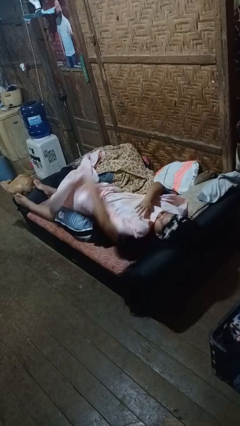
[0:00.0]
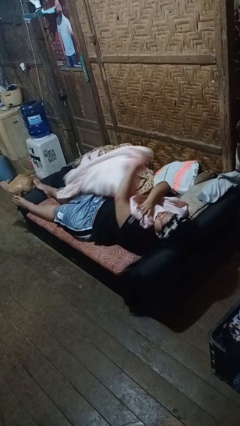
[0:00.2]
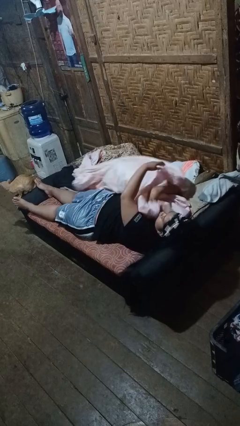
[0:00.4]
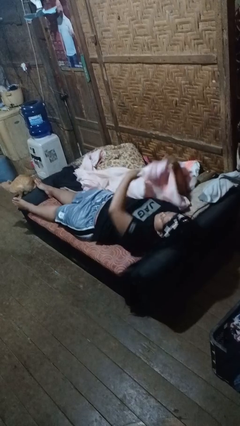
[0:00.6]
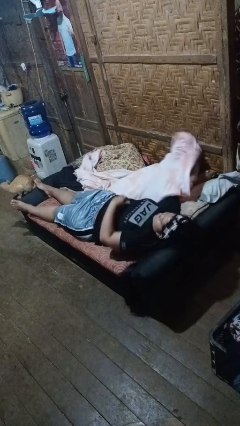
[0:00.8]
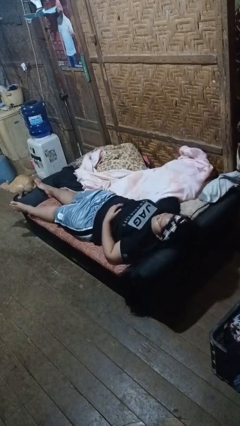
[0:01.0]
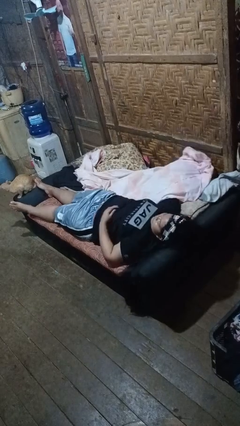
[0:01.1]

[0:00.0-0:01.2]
person uncovers with bedsheets

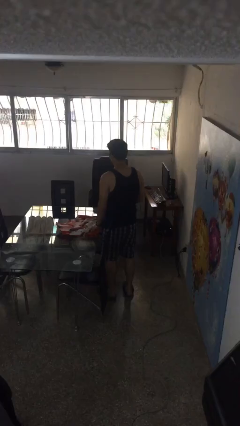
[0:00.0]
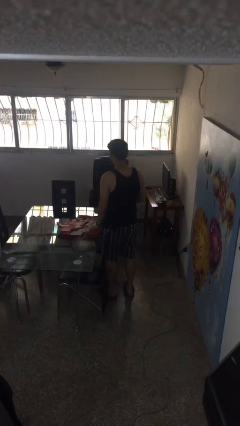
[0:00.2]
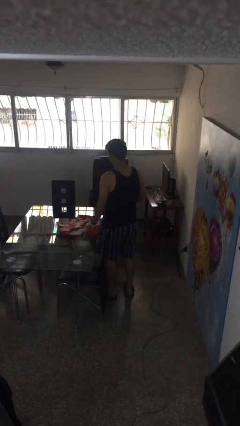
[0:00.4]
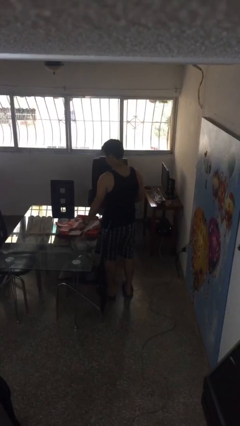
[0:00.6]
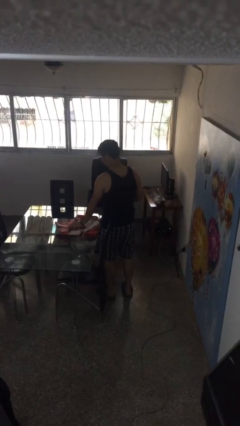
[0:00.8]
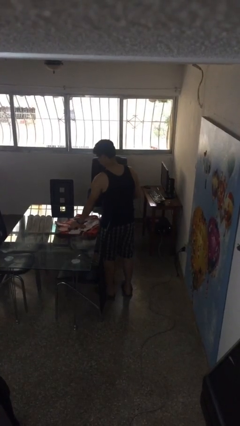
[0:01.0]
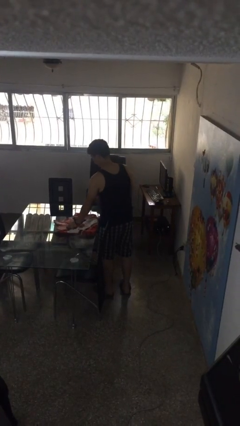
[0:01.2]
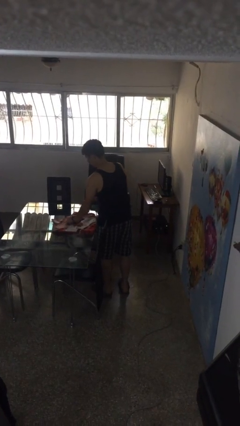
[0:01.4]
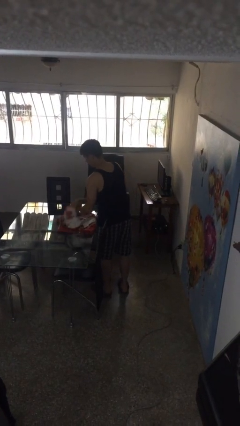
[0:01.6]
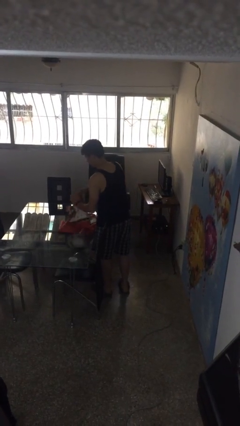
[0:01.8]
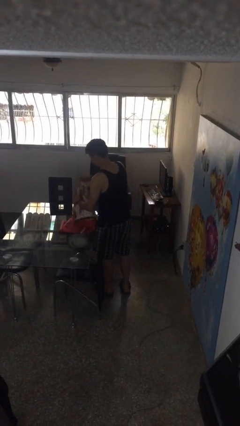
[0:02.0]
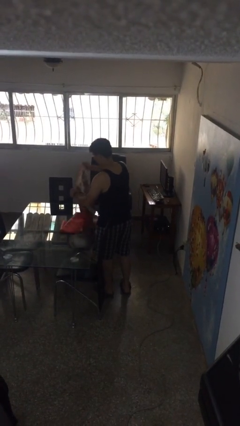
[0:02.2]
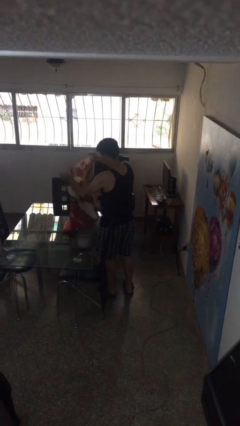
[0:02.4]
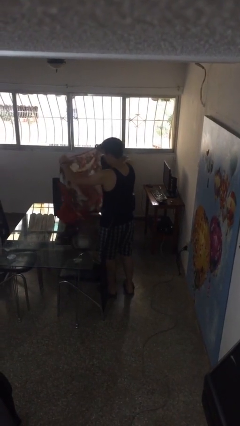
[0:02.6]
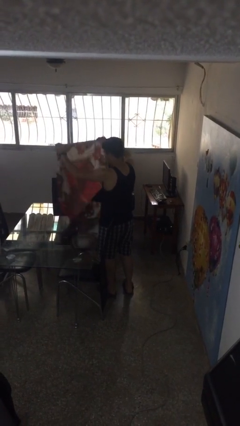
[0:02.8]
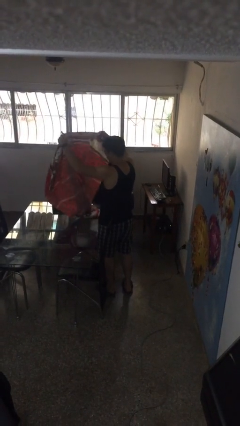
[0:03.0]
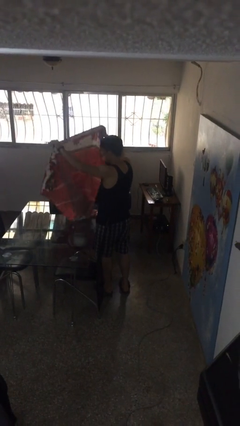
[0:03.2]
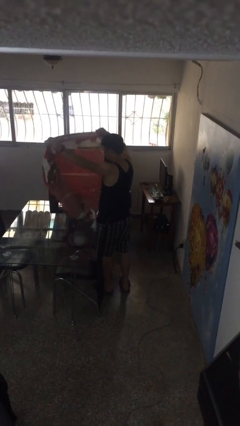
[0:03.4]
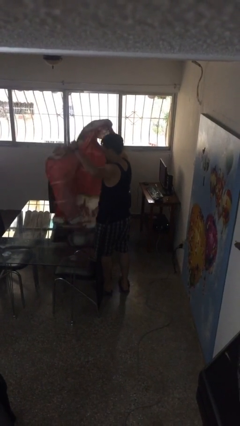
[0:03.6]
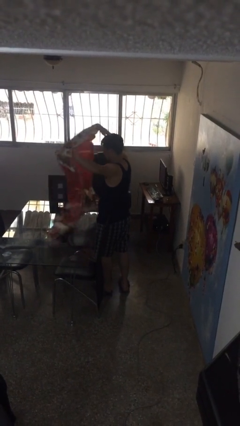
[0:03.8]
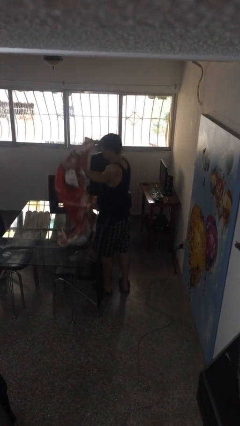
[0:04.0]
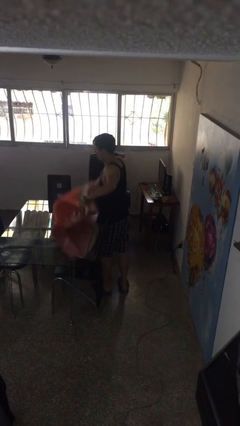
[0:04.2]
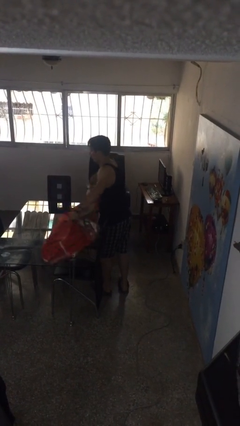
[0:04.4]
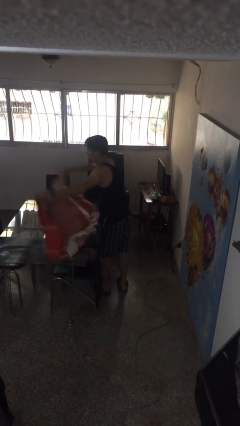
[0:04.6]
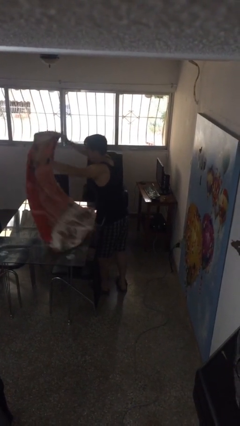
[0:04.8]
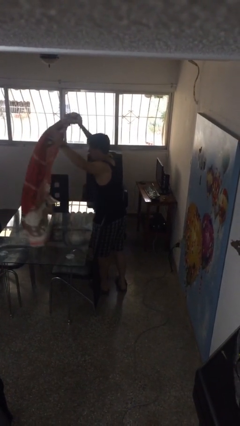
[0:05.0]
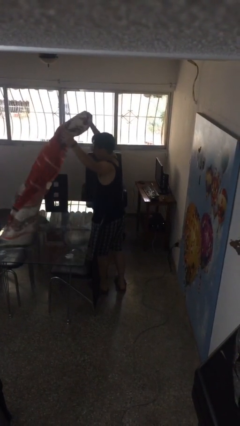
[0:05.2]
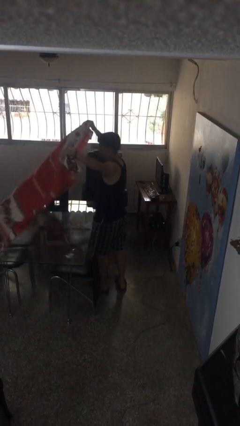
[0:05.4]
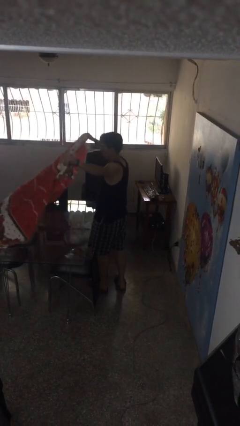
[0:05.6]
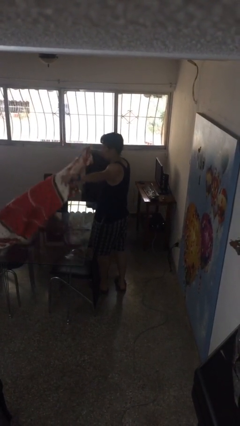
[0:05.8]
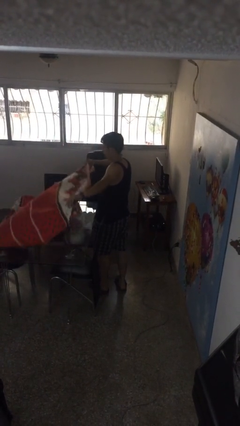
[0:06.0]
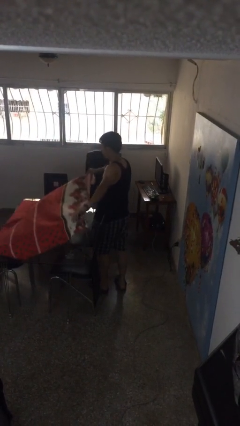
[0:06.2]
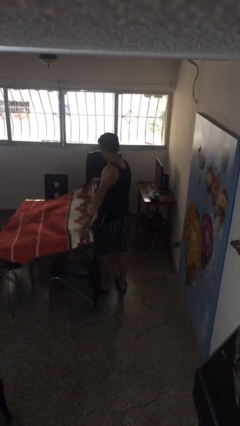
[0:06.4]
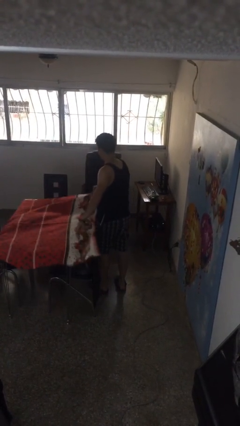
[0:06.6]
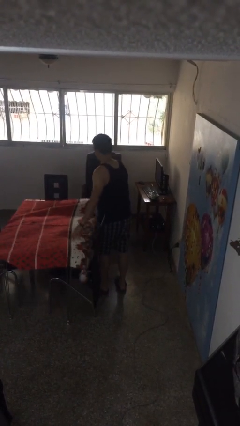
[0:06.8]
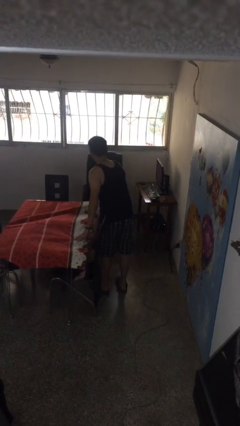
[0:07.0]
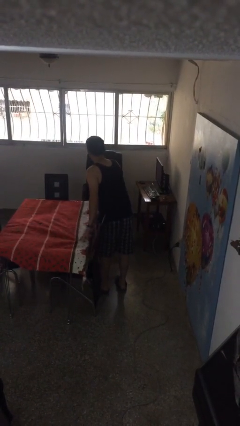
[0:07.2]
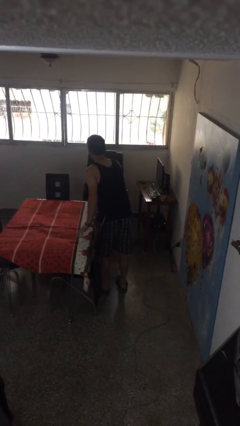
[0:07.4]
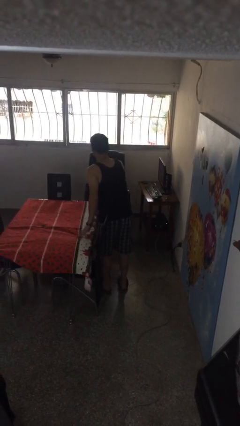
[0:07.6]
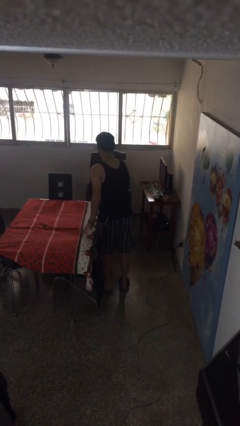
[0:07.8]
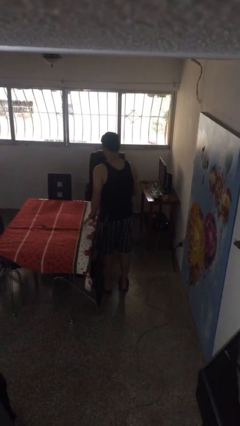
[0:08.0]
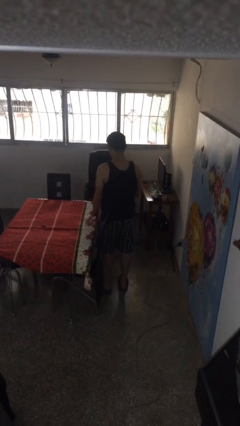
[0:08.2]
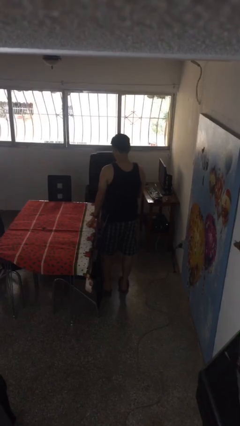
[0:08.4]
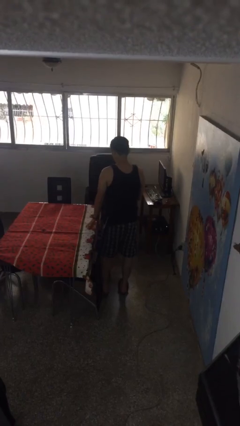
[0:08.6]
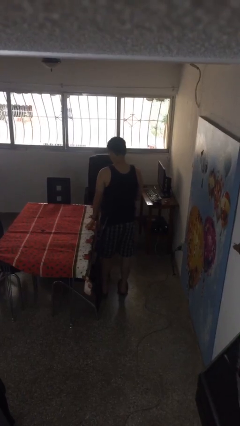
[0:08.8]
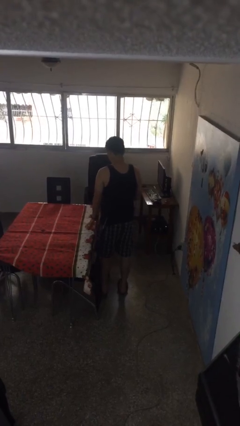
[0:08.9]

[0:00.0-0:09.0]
person spreads tablecloth

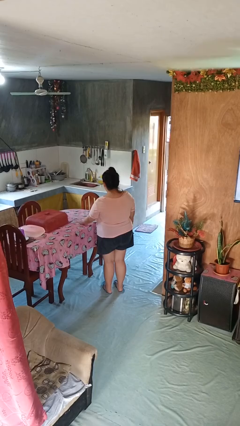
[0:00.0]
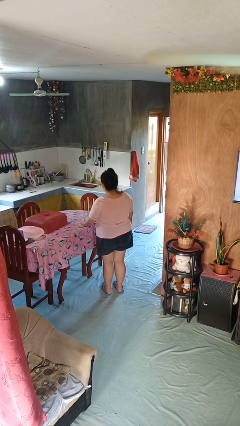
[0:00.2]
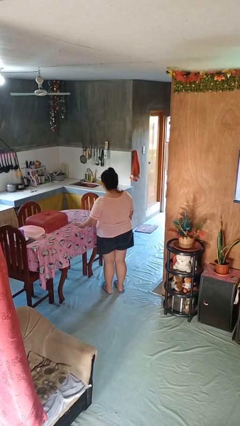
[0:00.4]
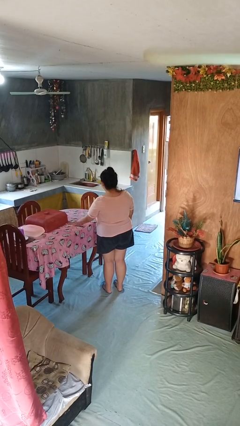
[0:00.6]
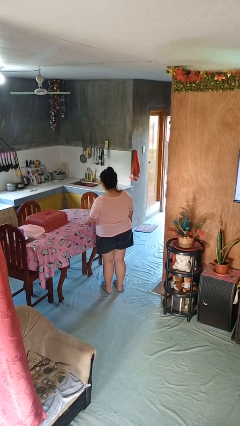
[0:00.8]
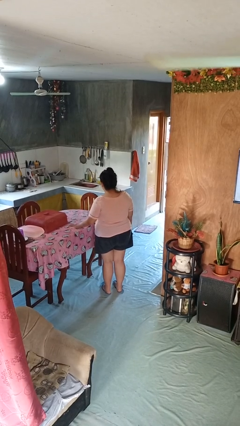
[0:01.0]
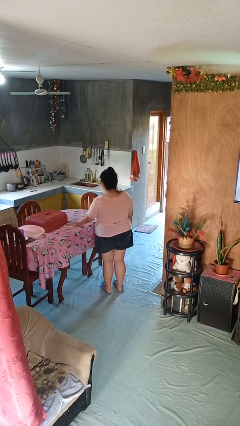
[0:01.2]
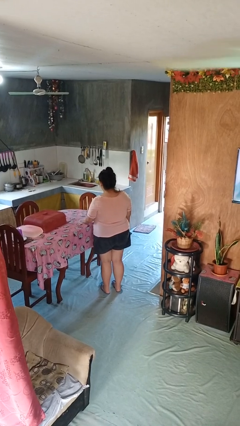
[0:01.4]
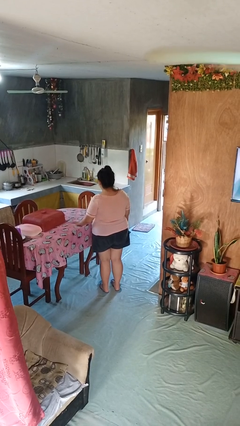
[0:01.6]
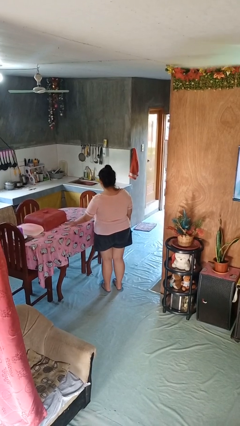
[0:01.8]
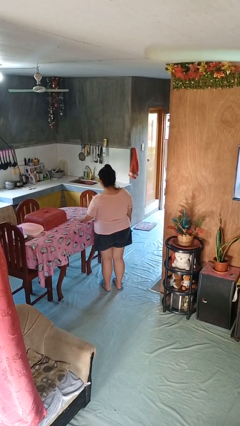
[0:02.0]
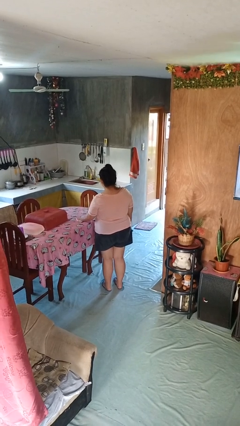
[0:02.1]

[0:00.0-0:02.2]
person cleans table with rag

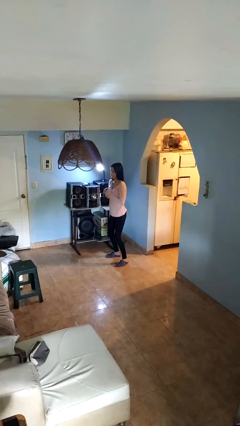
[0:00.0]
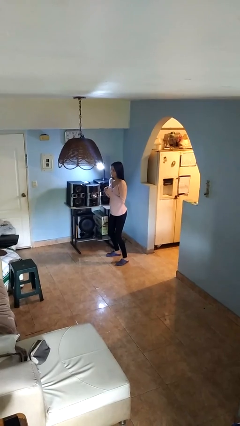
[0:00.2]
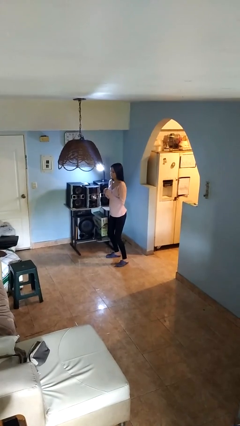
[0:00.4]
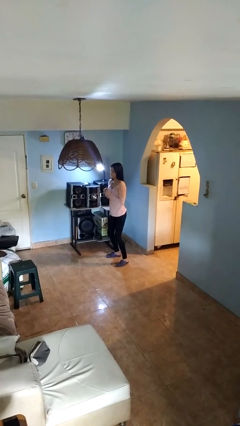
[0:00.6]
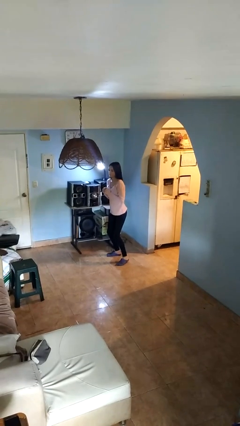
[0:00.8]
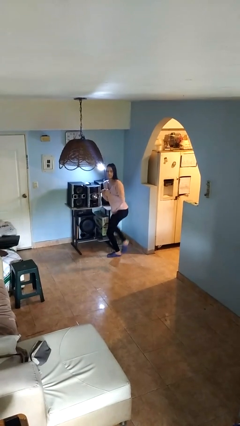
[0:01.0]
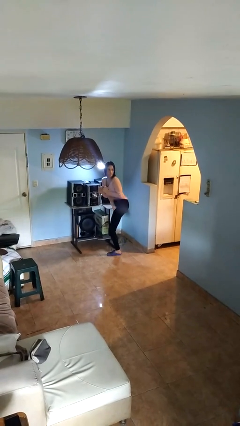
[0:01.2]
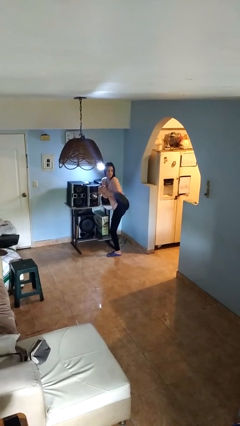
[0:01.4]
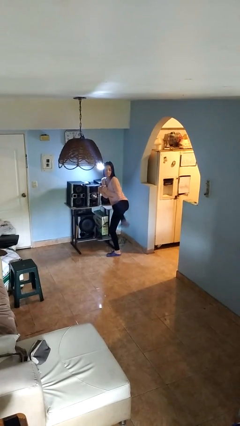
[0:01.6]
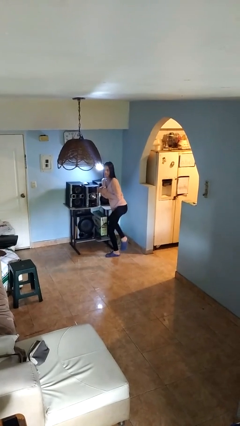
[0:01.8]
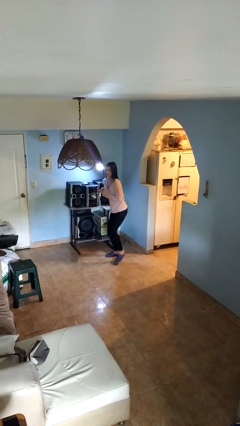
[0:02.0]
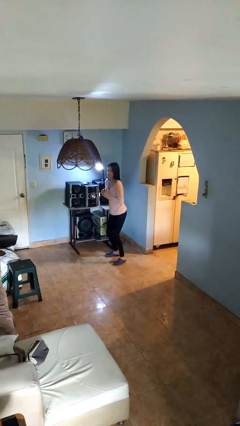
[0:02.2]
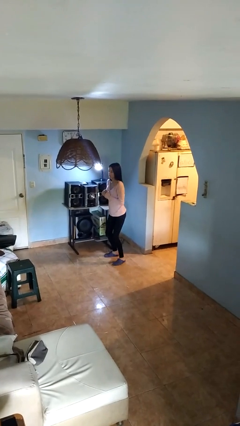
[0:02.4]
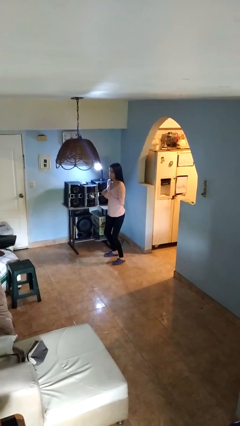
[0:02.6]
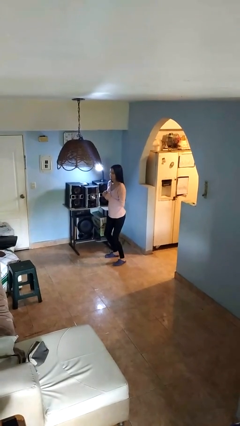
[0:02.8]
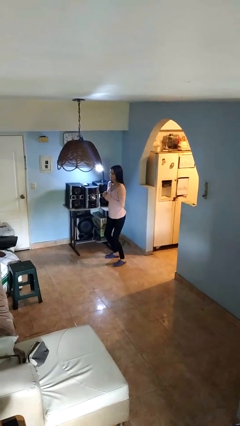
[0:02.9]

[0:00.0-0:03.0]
person karate kicks

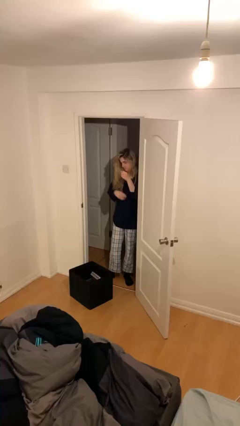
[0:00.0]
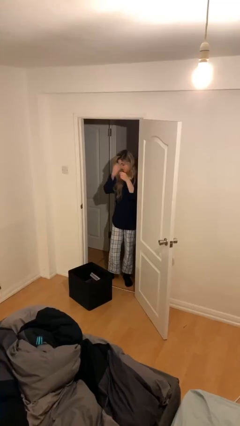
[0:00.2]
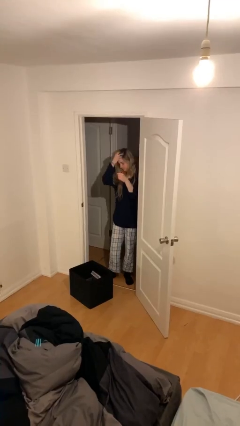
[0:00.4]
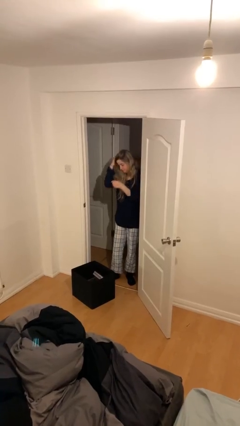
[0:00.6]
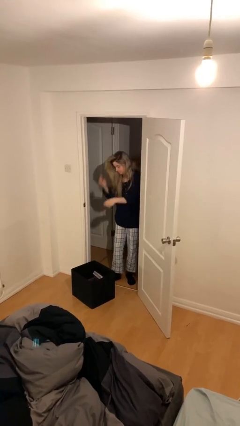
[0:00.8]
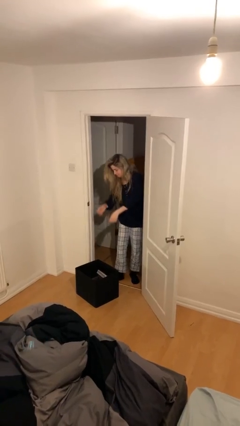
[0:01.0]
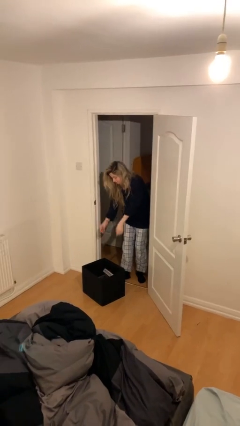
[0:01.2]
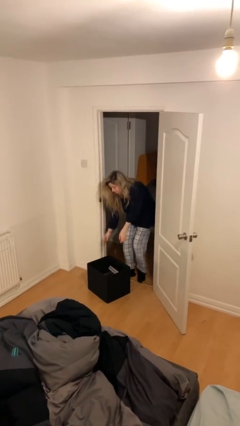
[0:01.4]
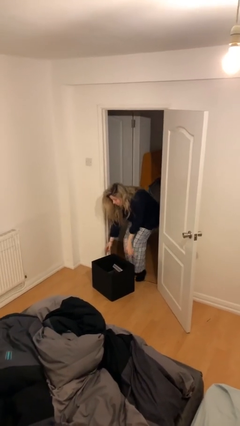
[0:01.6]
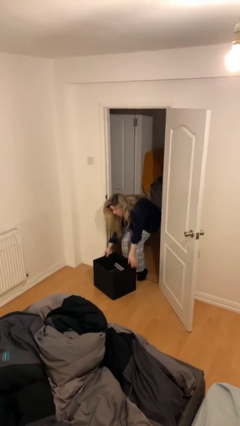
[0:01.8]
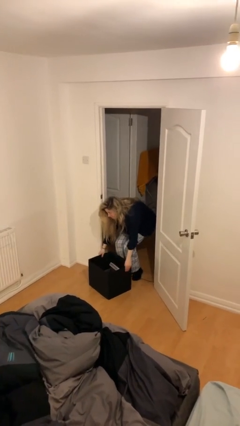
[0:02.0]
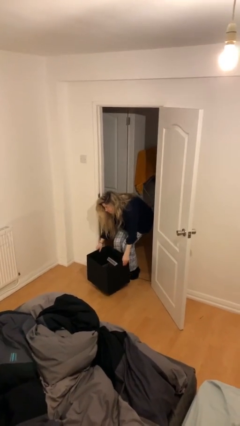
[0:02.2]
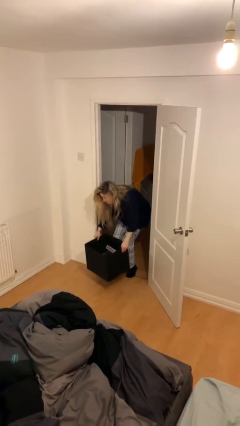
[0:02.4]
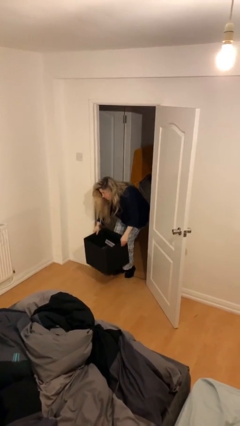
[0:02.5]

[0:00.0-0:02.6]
person picks up object from floor

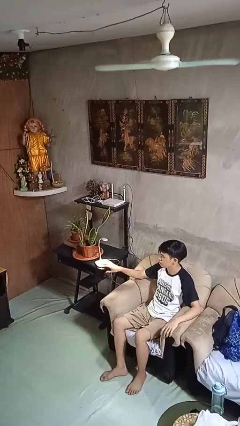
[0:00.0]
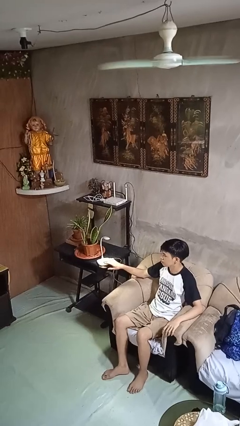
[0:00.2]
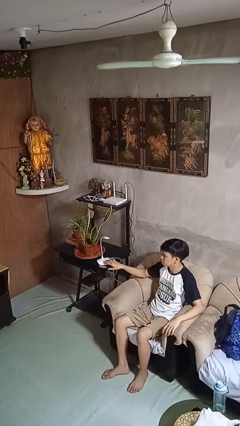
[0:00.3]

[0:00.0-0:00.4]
person turns off lamp
